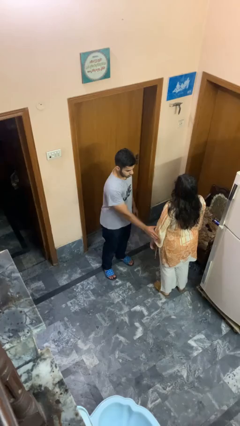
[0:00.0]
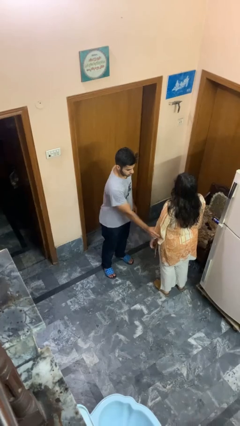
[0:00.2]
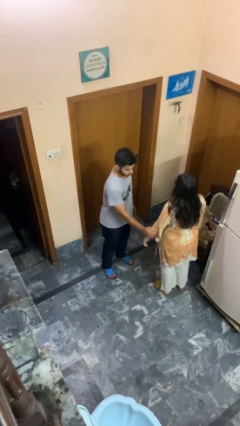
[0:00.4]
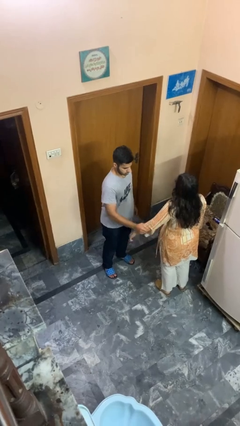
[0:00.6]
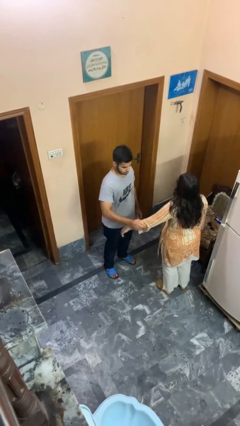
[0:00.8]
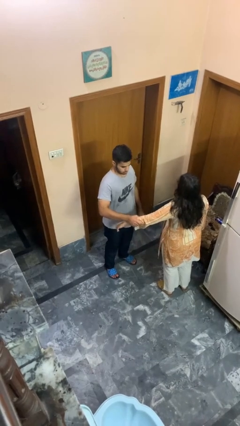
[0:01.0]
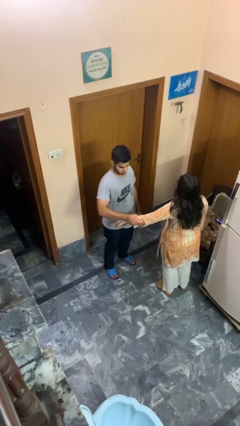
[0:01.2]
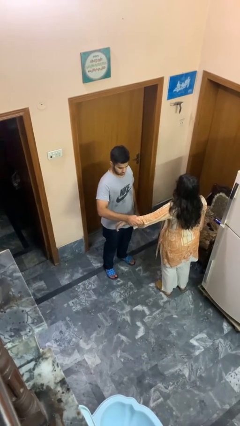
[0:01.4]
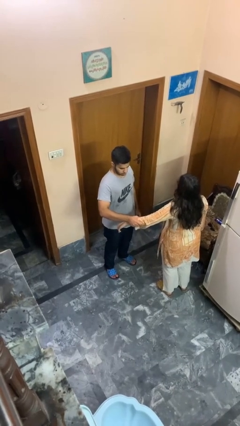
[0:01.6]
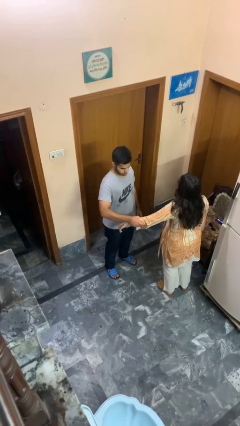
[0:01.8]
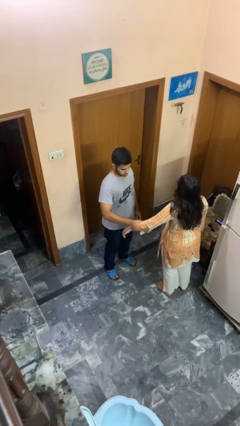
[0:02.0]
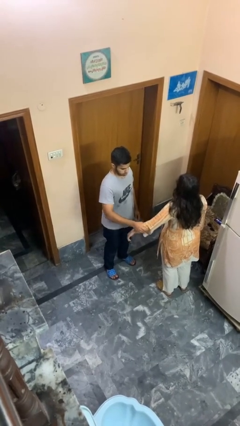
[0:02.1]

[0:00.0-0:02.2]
person grabs person by forearm

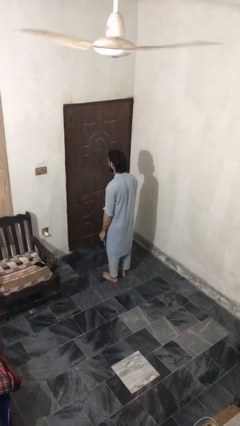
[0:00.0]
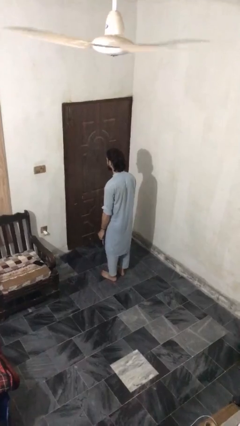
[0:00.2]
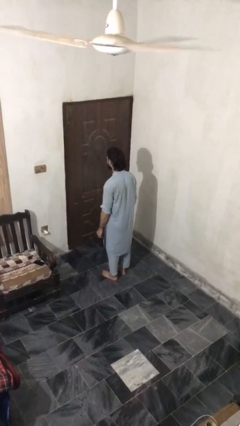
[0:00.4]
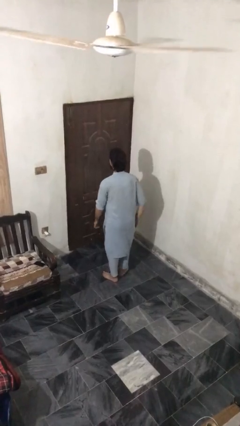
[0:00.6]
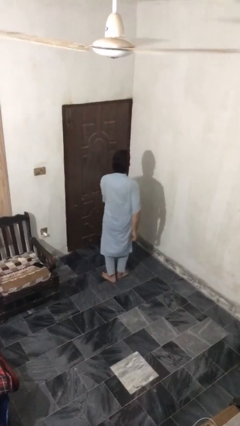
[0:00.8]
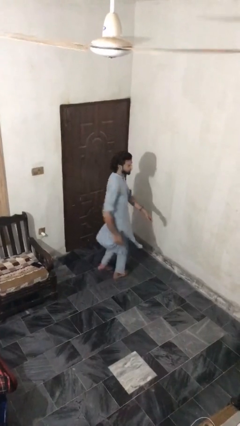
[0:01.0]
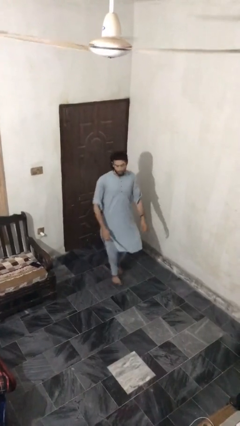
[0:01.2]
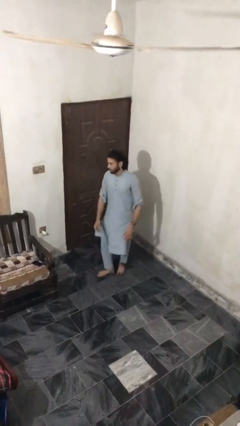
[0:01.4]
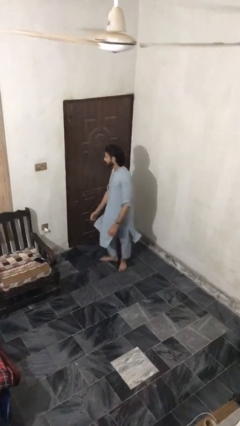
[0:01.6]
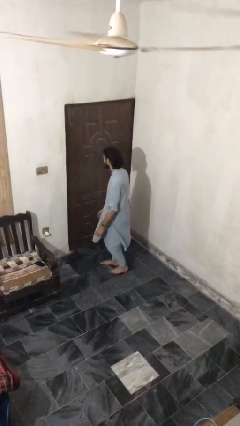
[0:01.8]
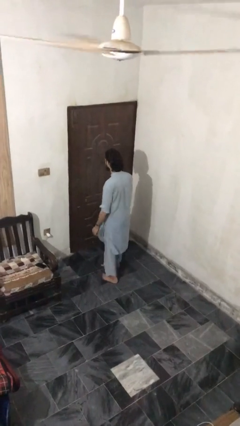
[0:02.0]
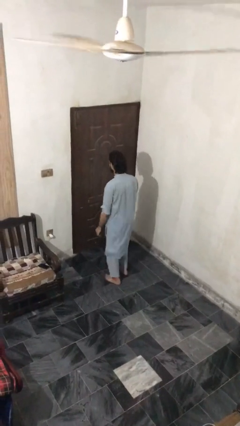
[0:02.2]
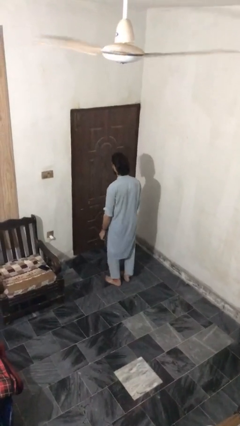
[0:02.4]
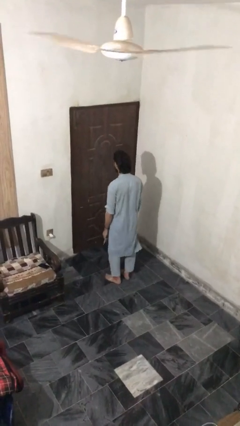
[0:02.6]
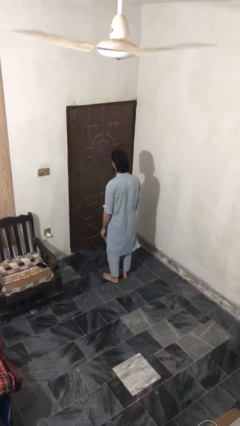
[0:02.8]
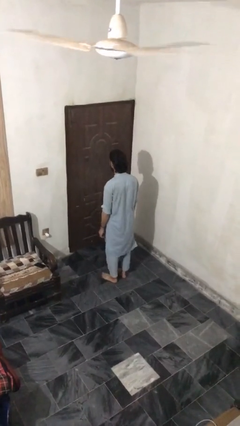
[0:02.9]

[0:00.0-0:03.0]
person twirls

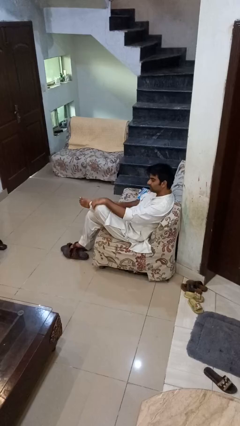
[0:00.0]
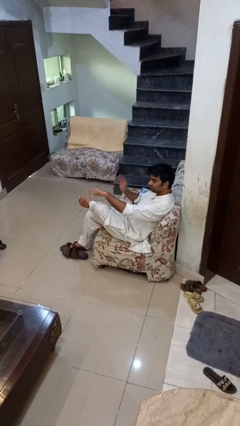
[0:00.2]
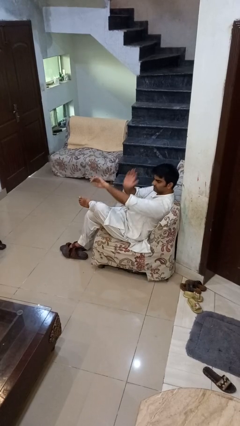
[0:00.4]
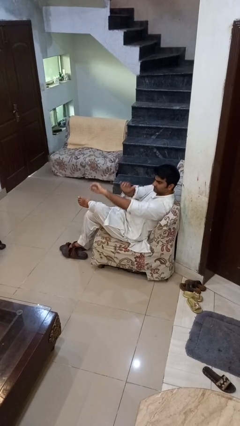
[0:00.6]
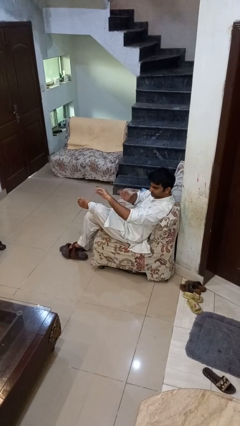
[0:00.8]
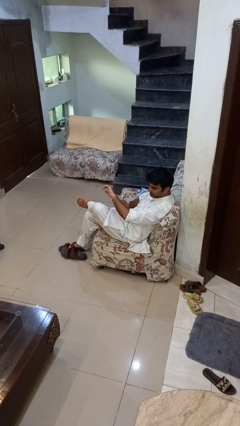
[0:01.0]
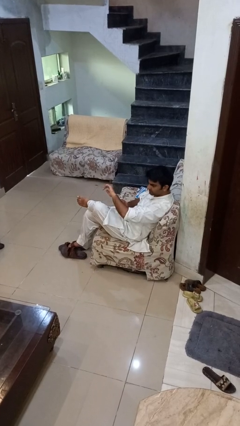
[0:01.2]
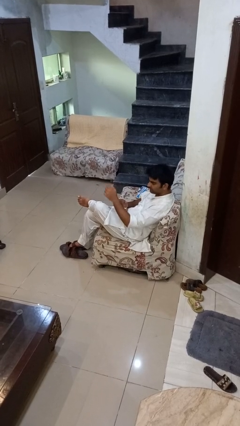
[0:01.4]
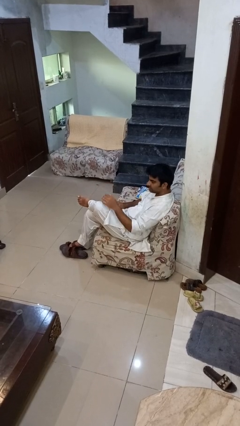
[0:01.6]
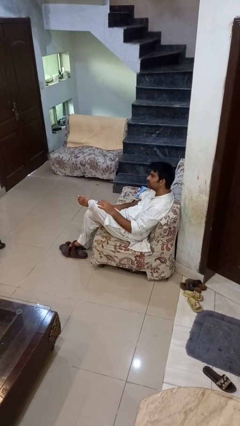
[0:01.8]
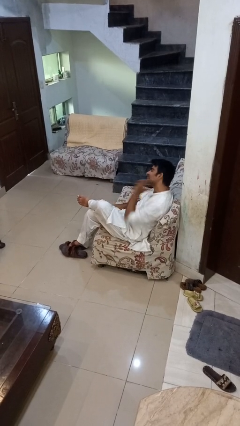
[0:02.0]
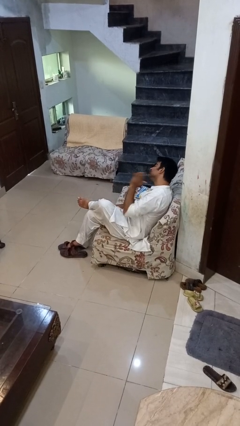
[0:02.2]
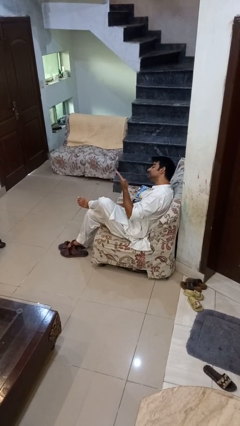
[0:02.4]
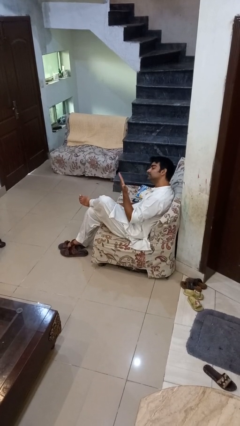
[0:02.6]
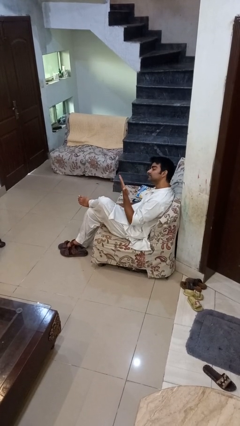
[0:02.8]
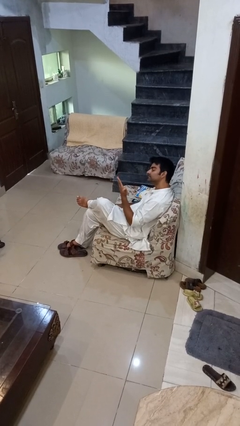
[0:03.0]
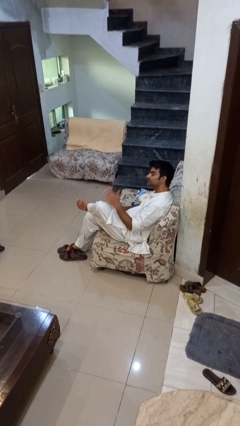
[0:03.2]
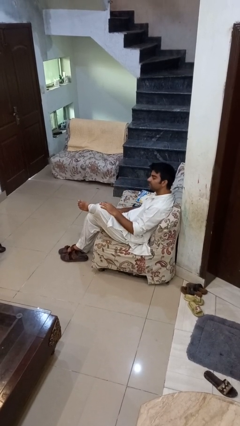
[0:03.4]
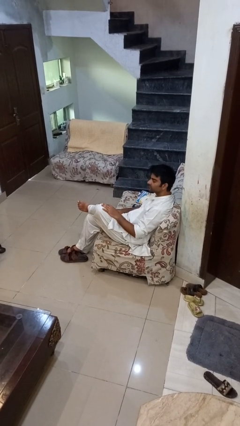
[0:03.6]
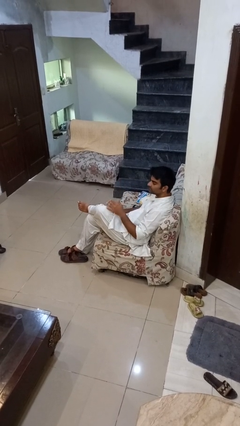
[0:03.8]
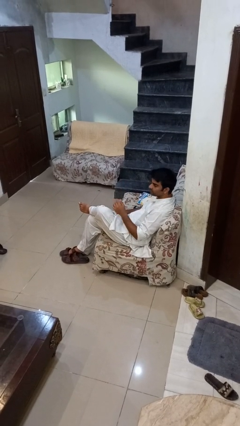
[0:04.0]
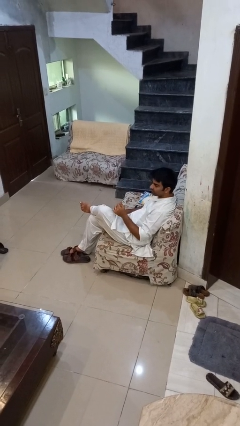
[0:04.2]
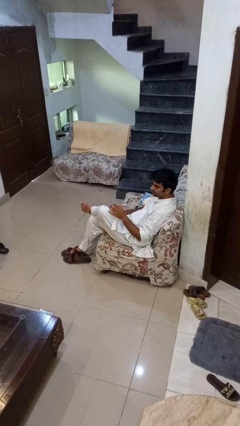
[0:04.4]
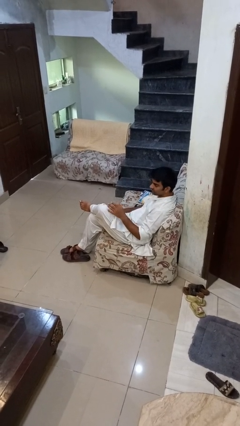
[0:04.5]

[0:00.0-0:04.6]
person swats bug

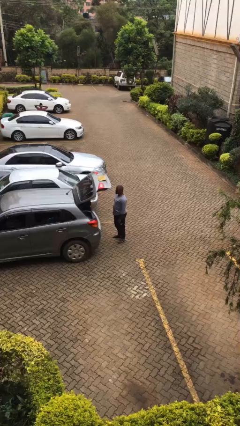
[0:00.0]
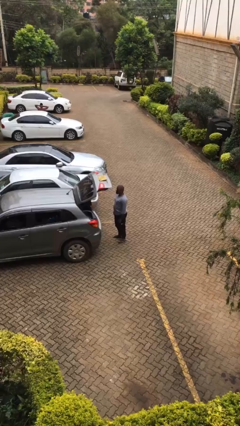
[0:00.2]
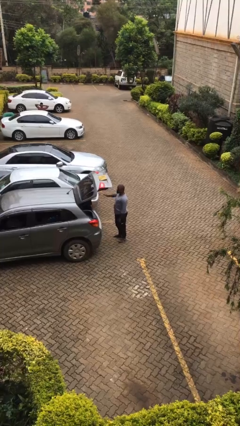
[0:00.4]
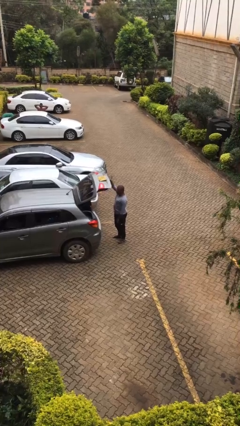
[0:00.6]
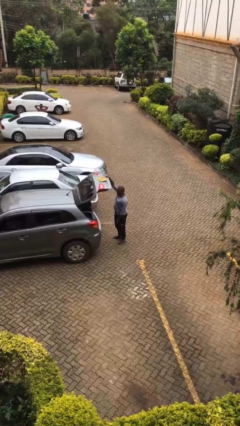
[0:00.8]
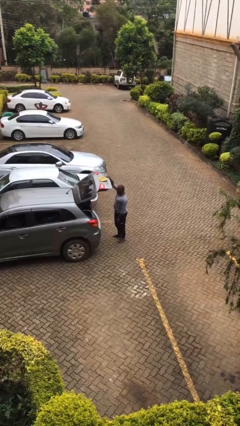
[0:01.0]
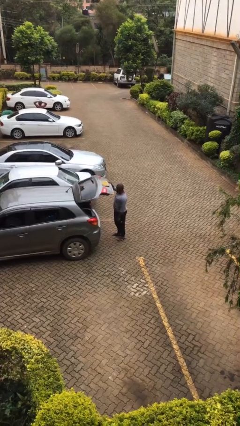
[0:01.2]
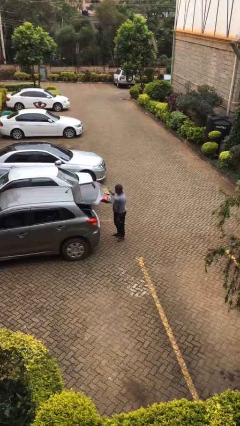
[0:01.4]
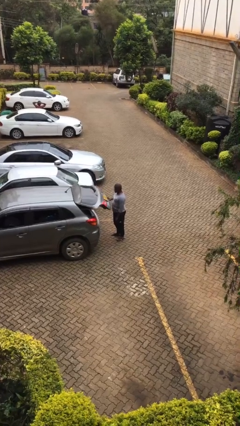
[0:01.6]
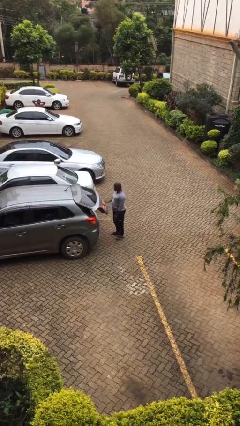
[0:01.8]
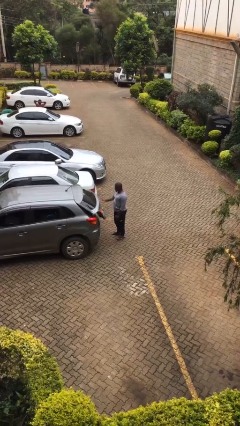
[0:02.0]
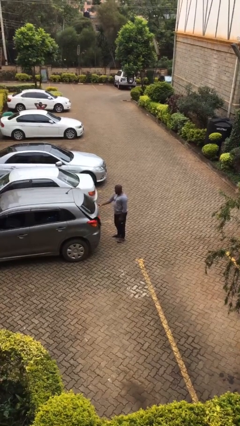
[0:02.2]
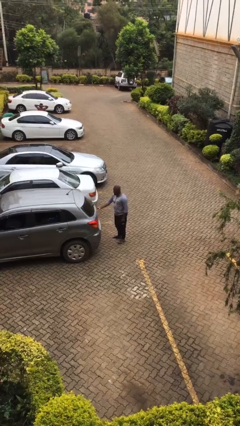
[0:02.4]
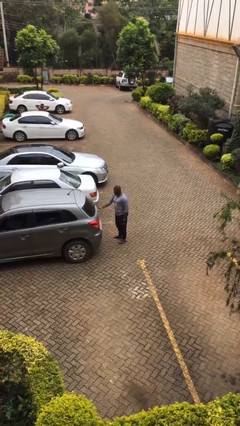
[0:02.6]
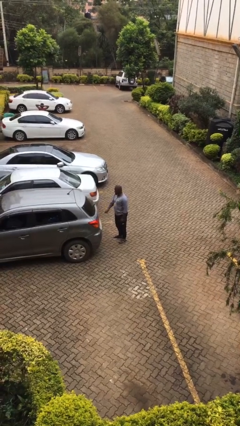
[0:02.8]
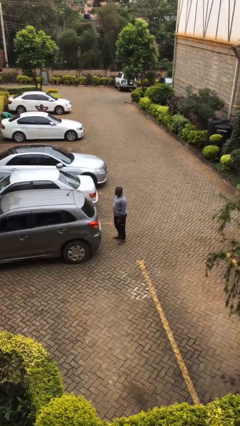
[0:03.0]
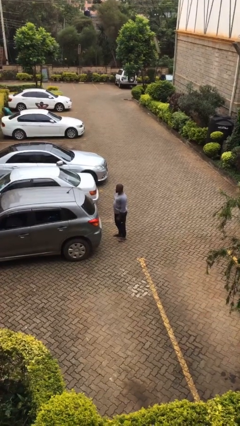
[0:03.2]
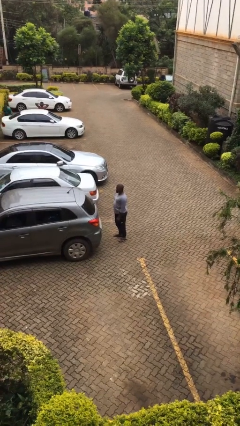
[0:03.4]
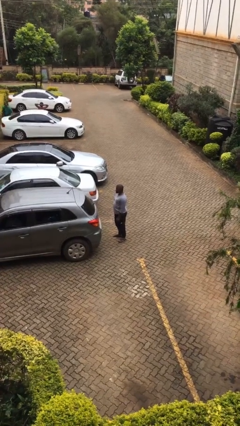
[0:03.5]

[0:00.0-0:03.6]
person closes car trunk

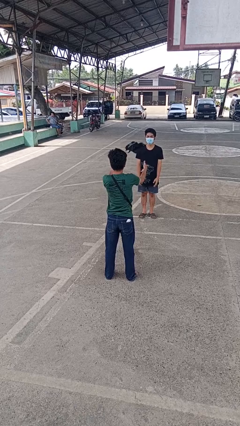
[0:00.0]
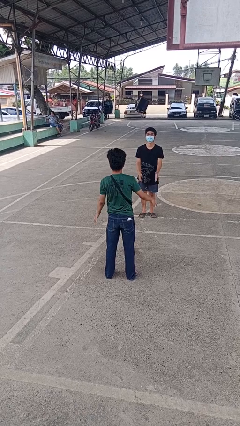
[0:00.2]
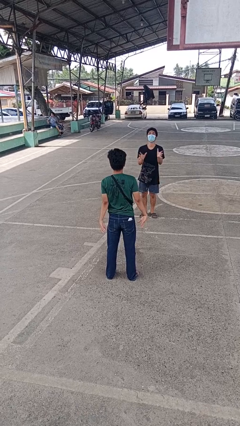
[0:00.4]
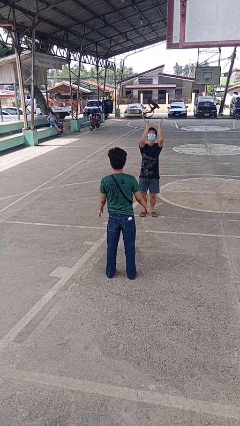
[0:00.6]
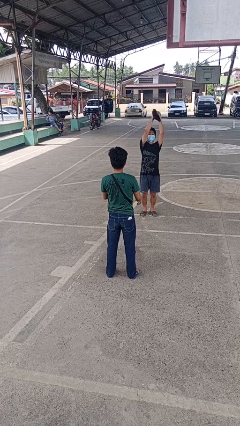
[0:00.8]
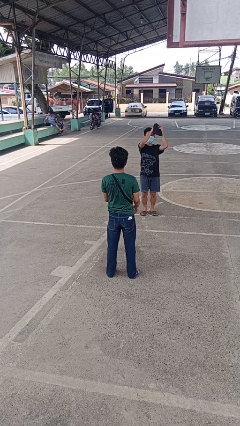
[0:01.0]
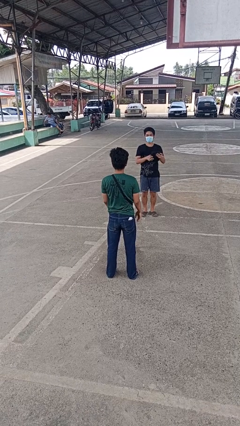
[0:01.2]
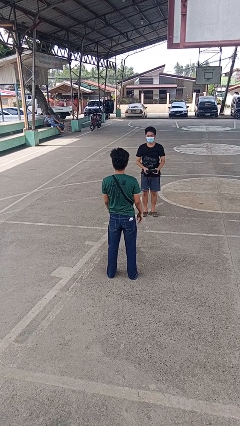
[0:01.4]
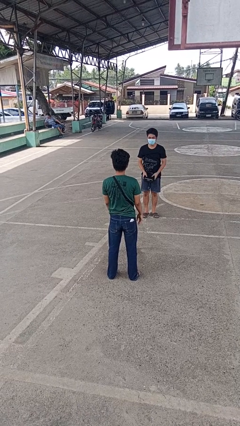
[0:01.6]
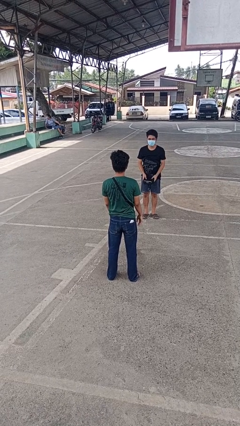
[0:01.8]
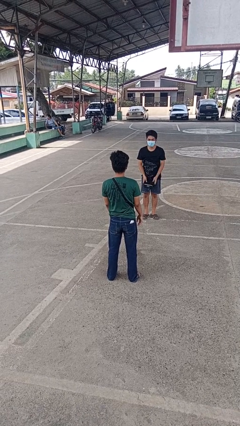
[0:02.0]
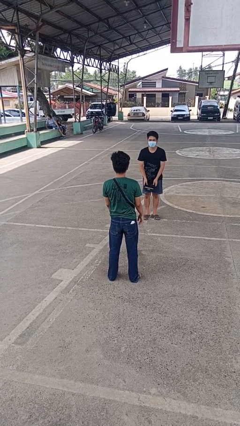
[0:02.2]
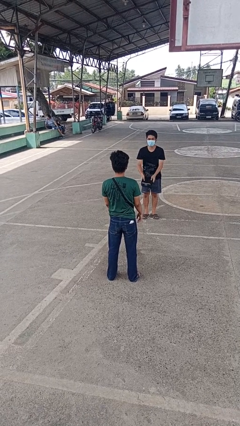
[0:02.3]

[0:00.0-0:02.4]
person throws object to person

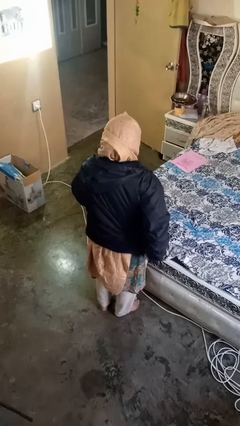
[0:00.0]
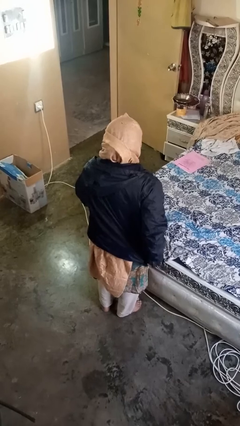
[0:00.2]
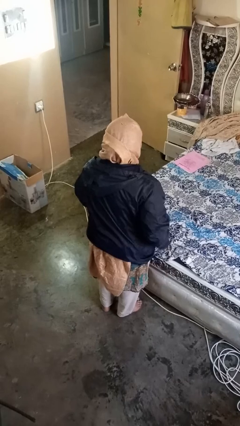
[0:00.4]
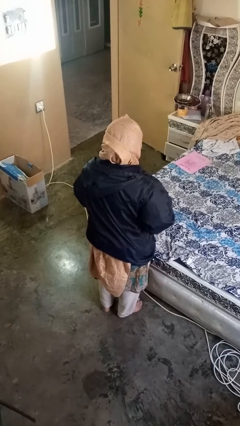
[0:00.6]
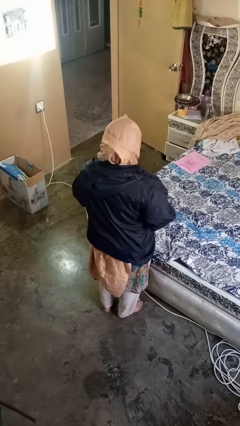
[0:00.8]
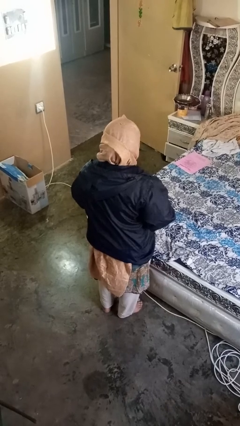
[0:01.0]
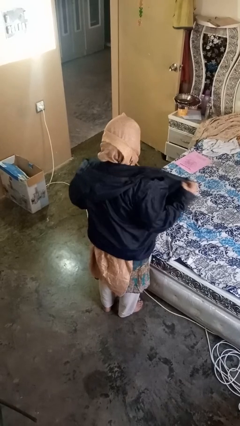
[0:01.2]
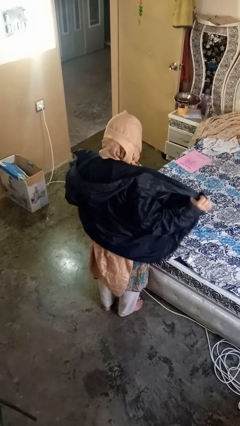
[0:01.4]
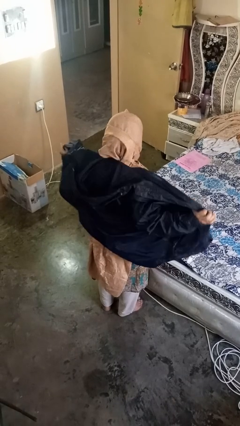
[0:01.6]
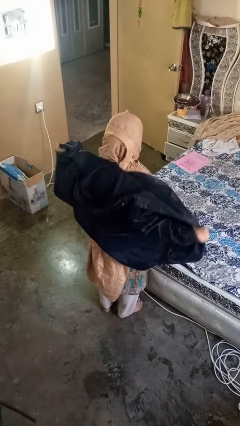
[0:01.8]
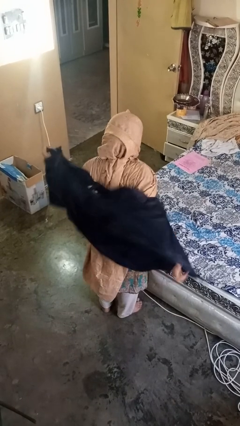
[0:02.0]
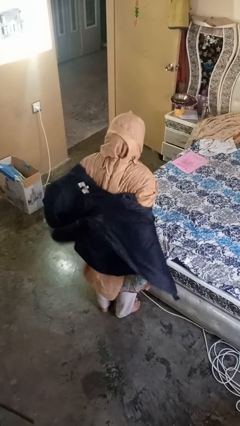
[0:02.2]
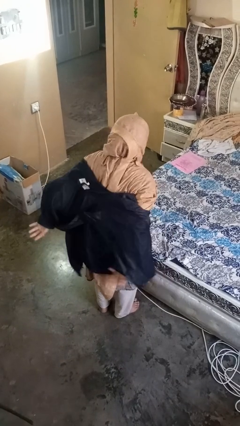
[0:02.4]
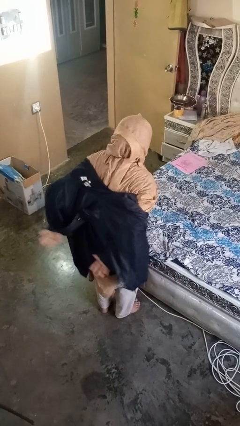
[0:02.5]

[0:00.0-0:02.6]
person unzips jacket
